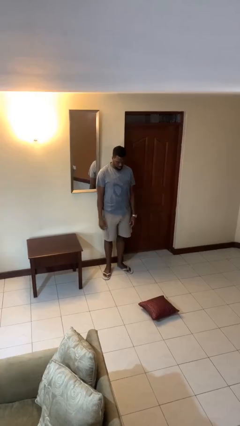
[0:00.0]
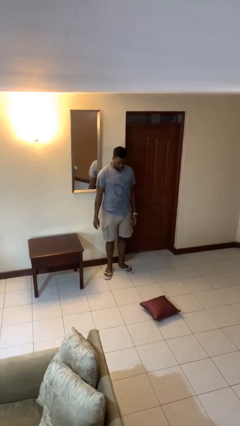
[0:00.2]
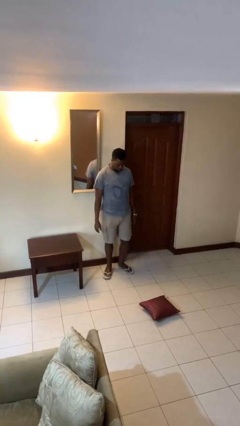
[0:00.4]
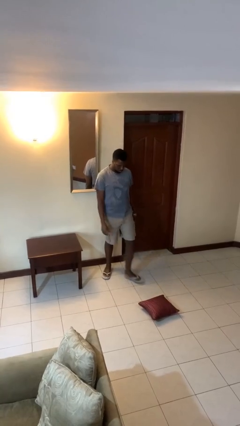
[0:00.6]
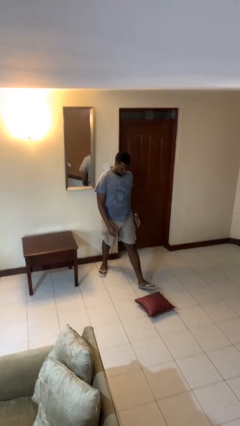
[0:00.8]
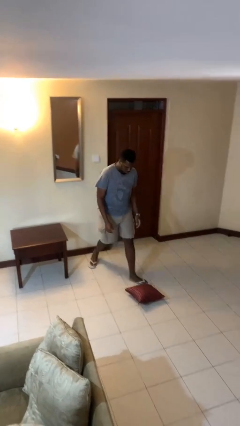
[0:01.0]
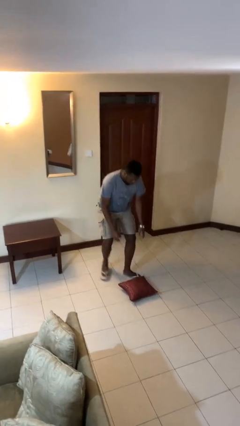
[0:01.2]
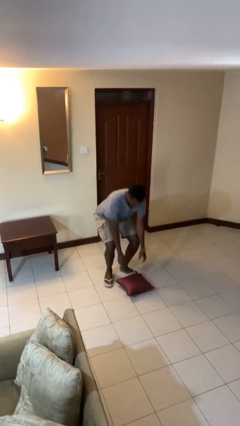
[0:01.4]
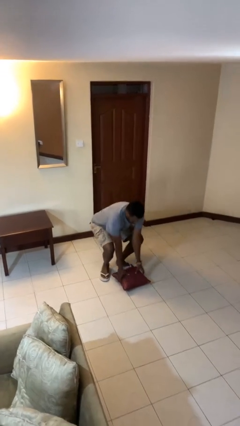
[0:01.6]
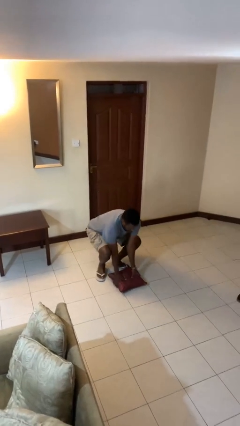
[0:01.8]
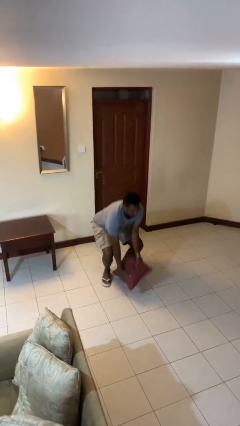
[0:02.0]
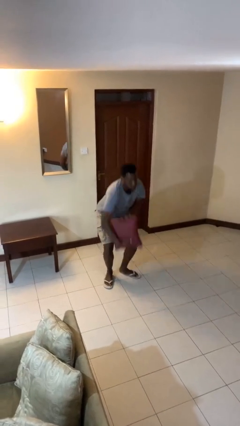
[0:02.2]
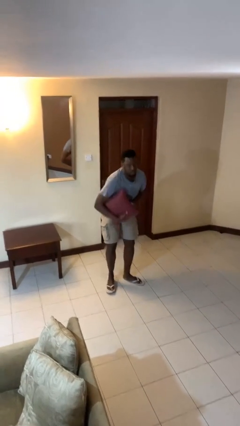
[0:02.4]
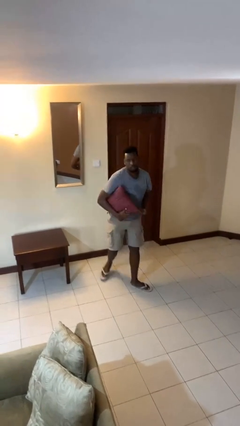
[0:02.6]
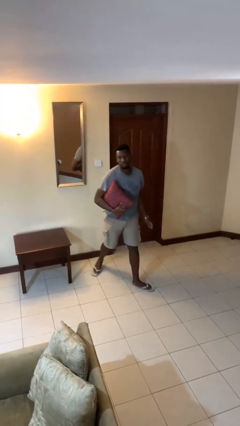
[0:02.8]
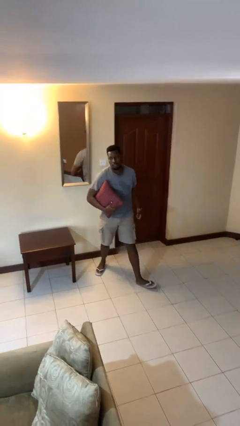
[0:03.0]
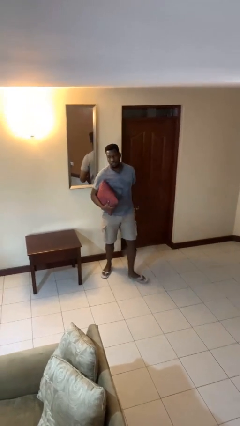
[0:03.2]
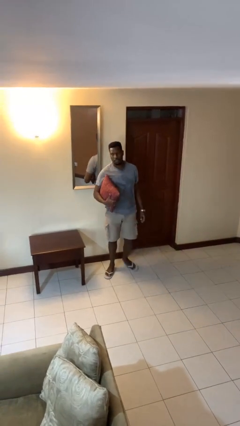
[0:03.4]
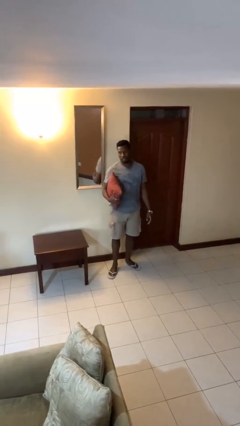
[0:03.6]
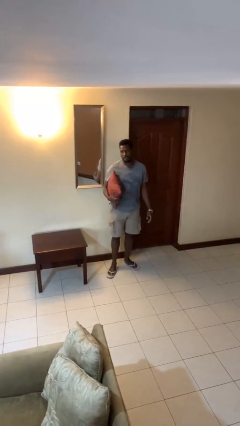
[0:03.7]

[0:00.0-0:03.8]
person picks up object from floor

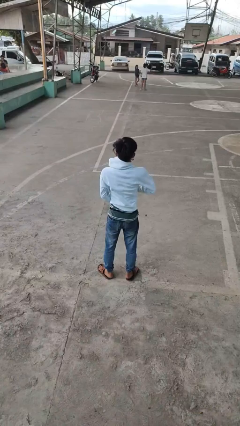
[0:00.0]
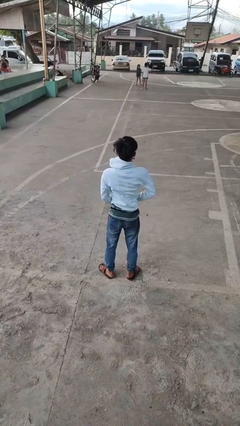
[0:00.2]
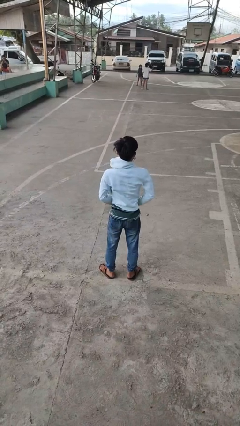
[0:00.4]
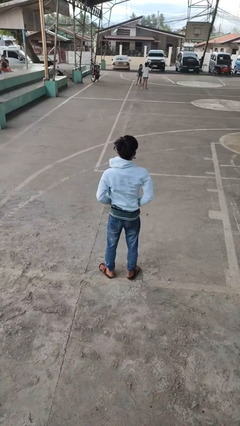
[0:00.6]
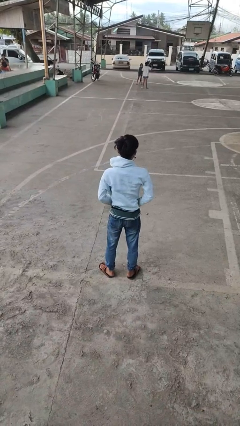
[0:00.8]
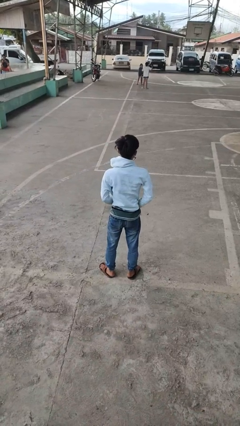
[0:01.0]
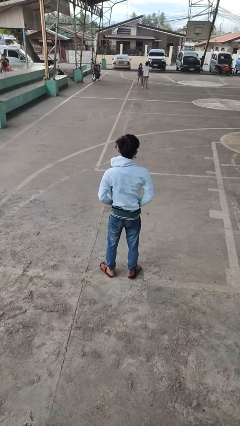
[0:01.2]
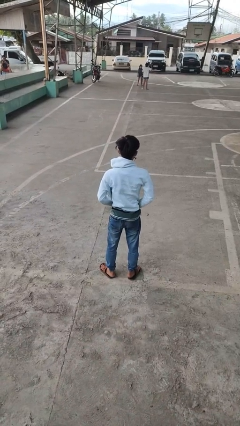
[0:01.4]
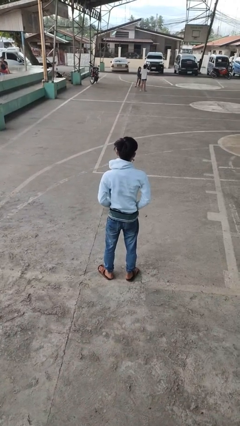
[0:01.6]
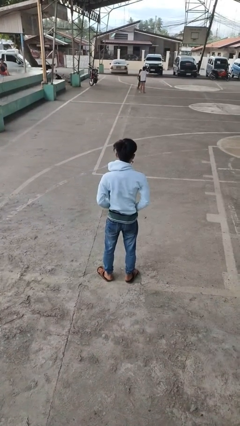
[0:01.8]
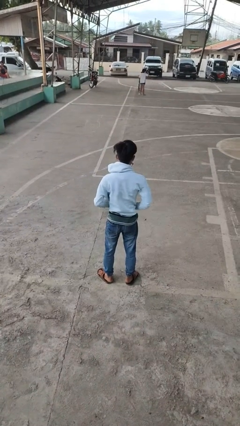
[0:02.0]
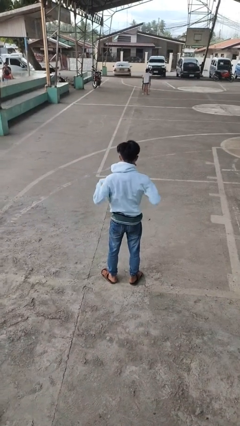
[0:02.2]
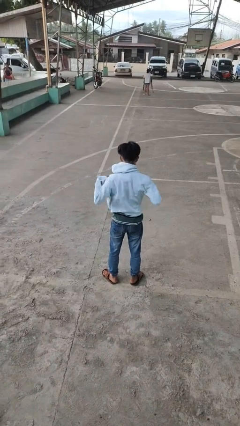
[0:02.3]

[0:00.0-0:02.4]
person unzips jacket

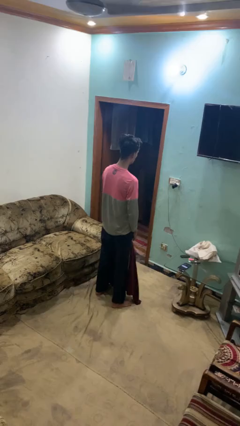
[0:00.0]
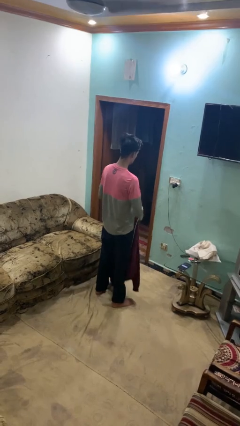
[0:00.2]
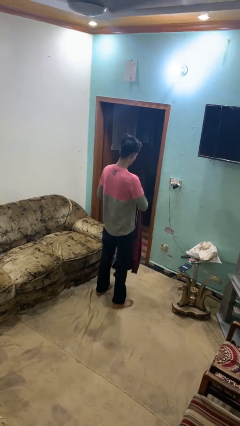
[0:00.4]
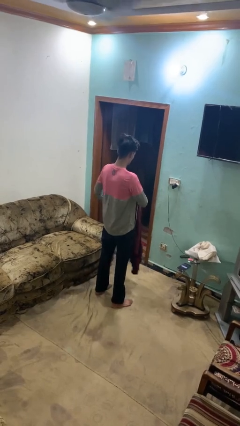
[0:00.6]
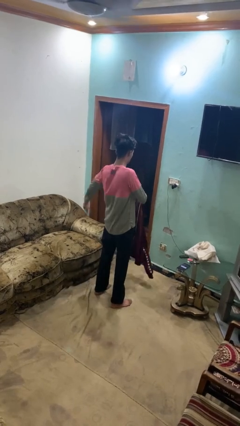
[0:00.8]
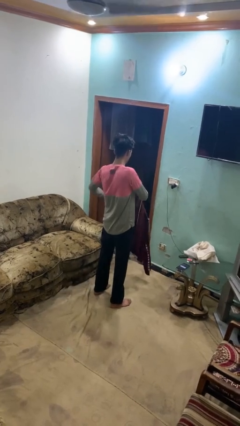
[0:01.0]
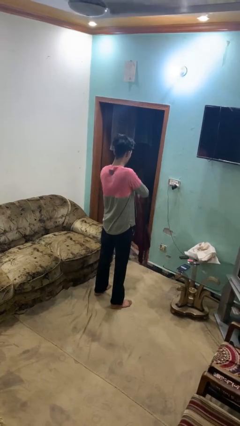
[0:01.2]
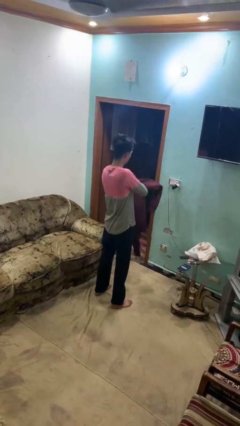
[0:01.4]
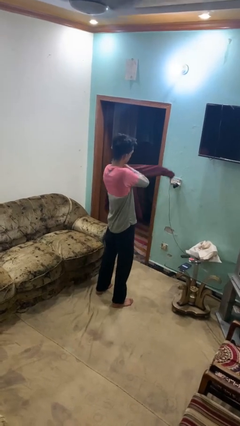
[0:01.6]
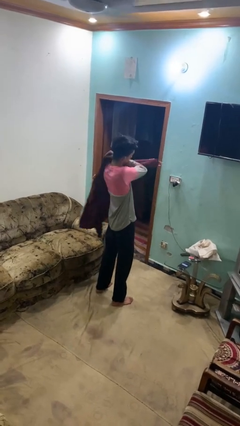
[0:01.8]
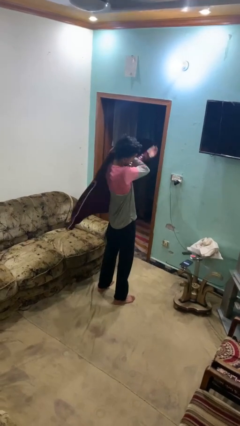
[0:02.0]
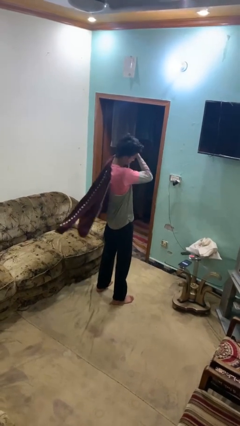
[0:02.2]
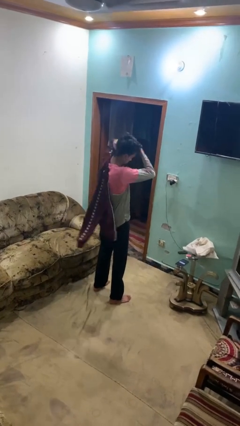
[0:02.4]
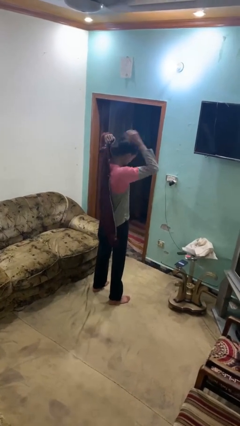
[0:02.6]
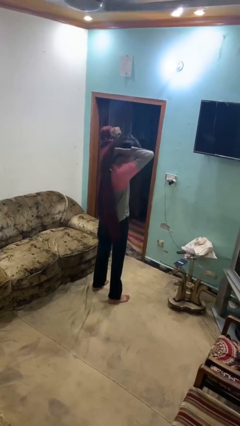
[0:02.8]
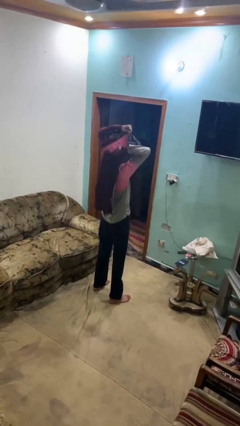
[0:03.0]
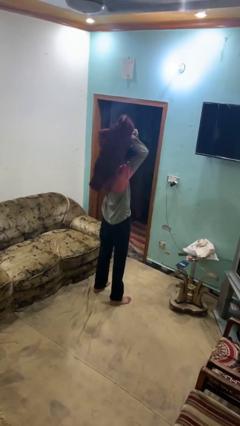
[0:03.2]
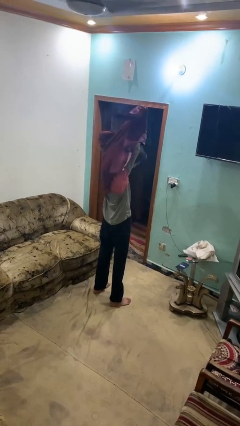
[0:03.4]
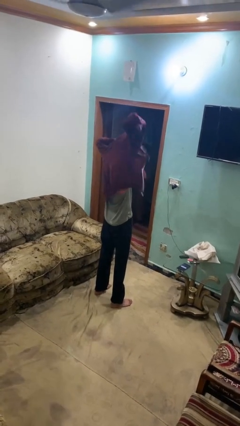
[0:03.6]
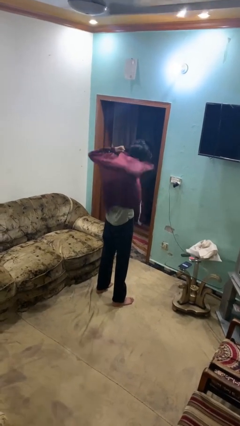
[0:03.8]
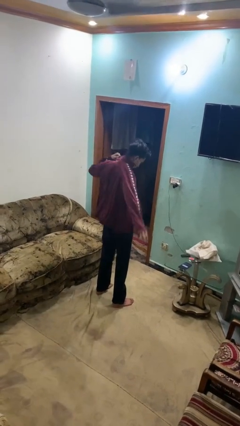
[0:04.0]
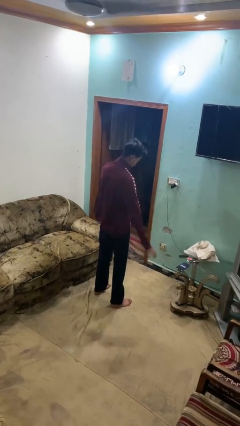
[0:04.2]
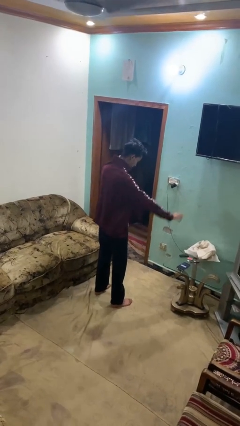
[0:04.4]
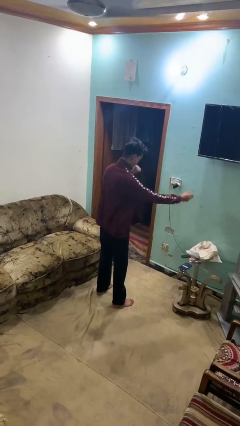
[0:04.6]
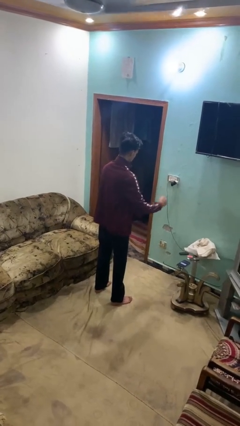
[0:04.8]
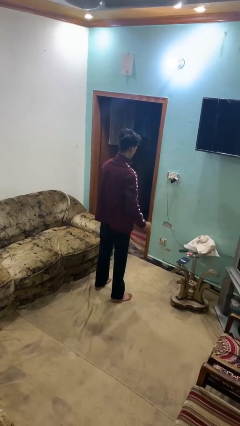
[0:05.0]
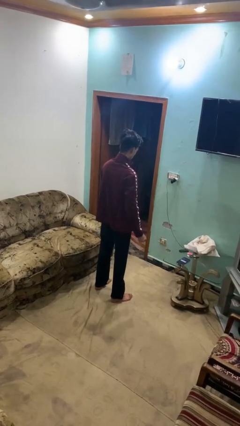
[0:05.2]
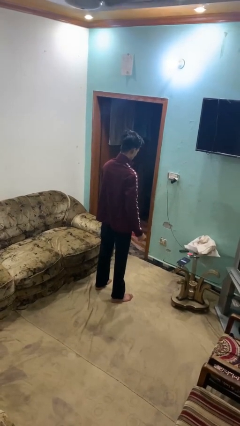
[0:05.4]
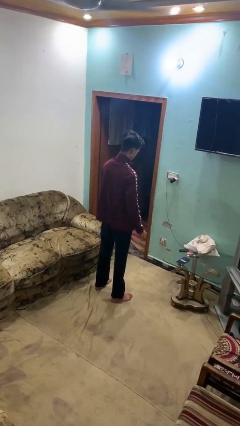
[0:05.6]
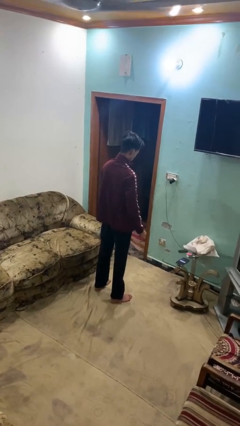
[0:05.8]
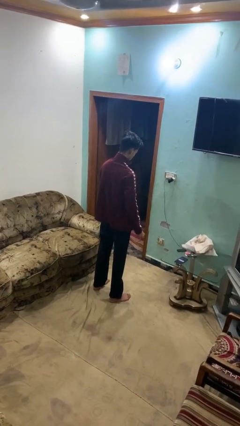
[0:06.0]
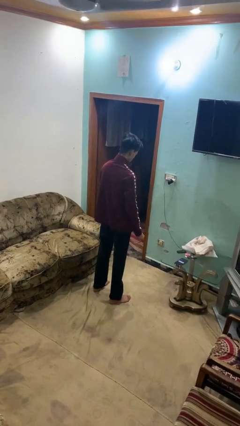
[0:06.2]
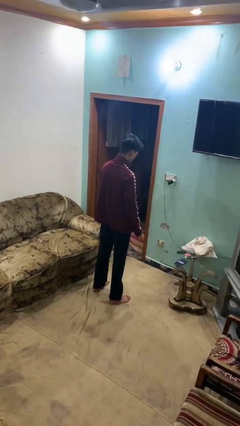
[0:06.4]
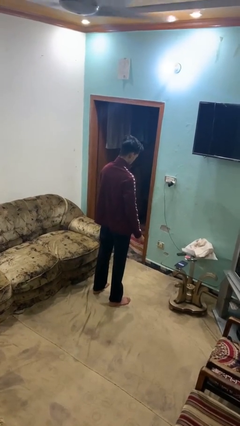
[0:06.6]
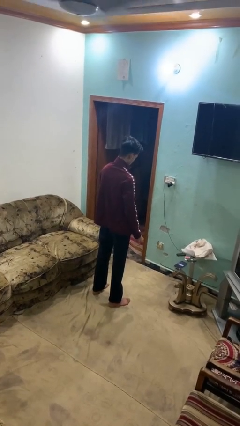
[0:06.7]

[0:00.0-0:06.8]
person puts on jacket

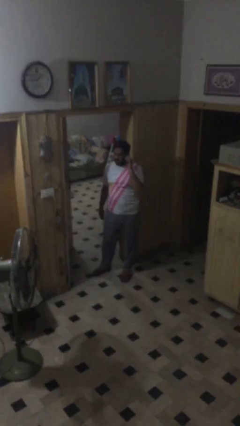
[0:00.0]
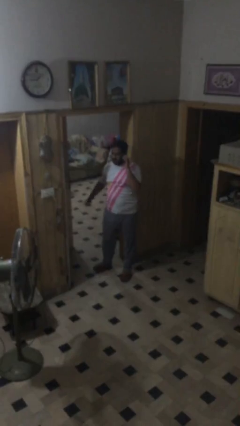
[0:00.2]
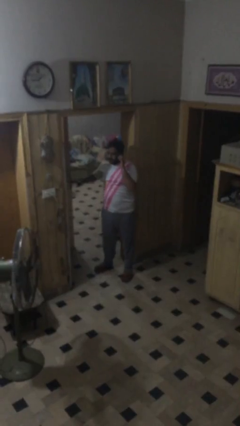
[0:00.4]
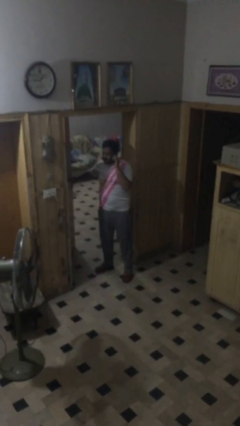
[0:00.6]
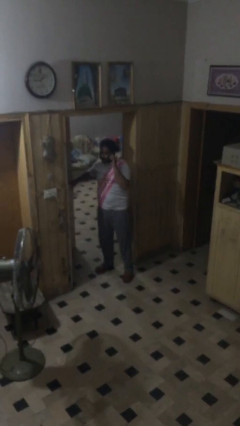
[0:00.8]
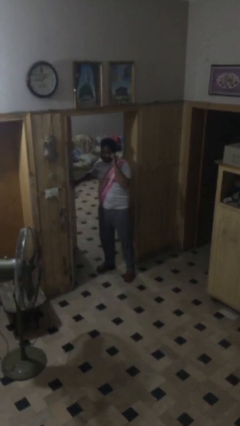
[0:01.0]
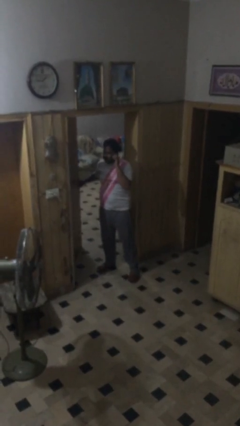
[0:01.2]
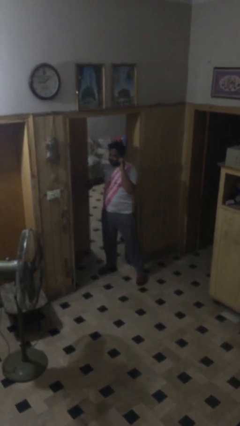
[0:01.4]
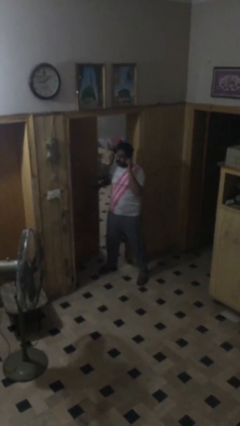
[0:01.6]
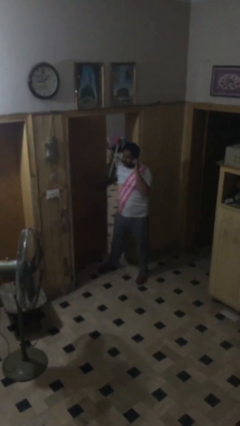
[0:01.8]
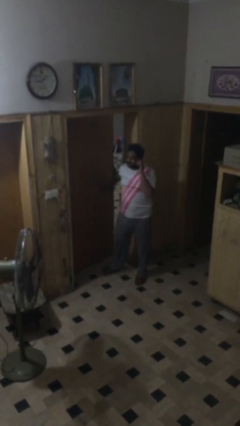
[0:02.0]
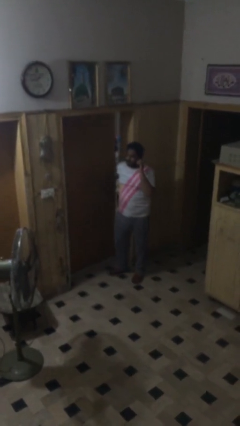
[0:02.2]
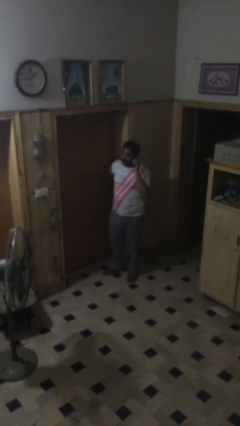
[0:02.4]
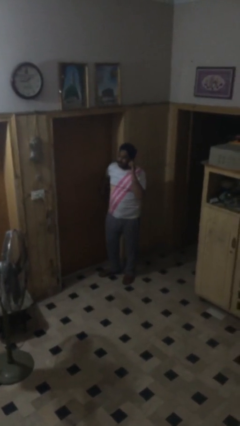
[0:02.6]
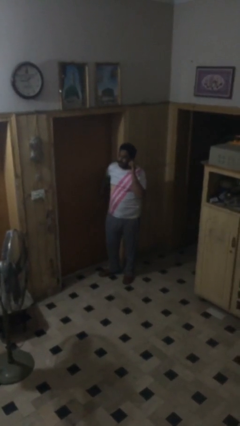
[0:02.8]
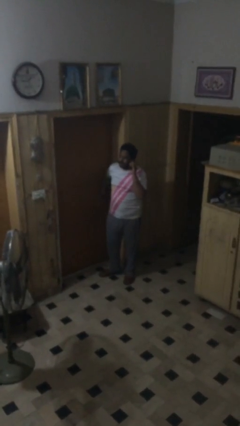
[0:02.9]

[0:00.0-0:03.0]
person closes facility door

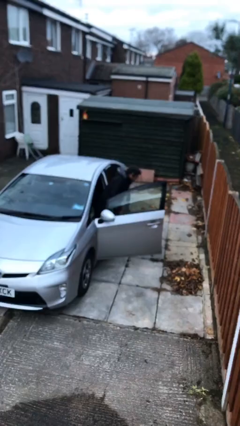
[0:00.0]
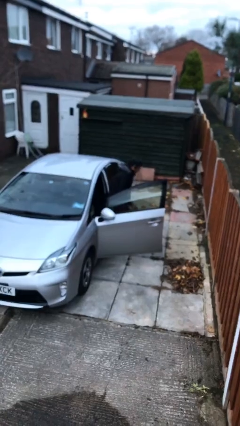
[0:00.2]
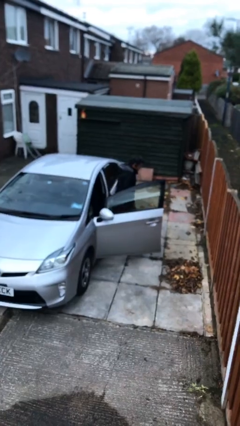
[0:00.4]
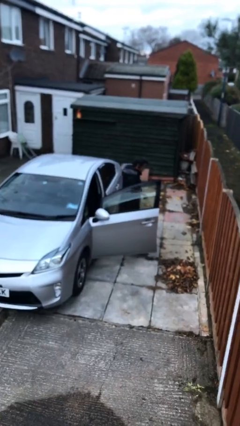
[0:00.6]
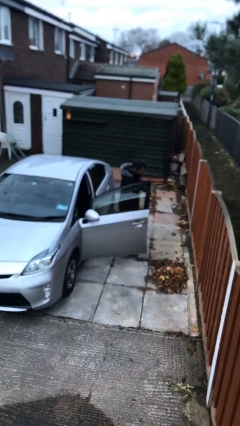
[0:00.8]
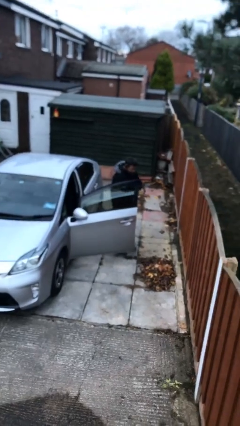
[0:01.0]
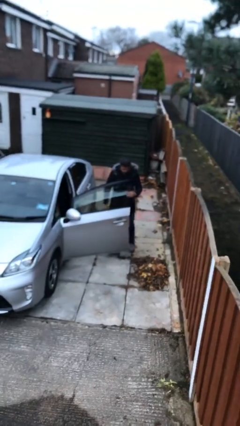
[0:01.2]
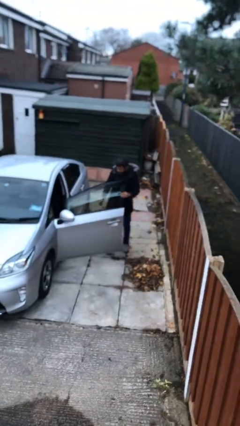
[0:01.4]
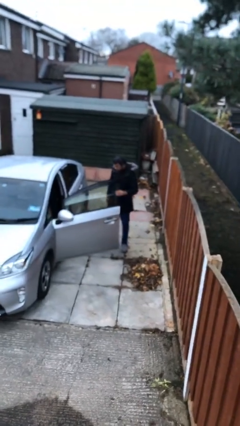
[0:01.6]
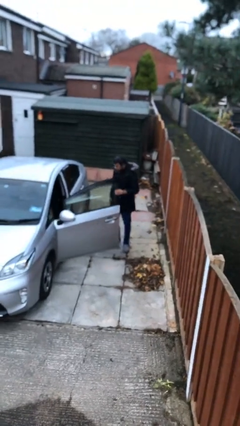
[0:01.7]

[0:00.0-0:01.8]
person exits car
